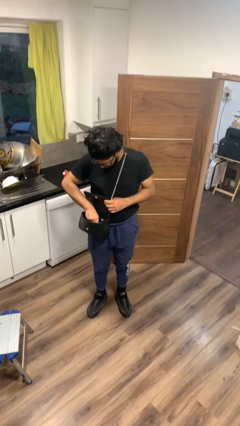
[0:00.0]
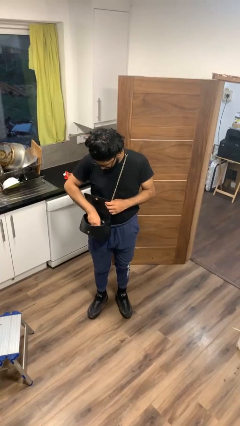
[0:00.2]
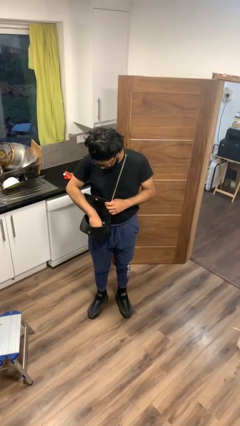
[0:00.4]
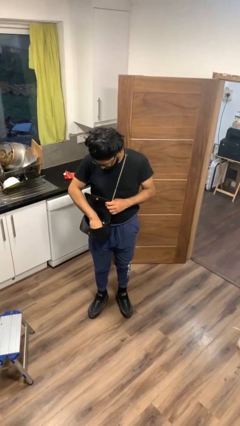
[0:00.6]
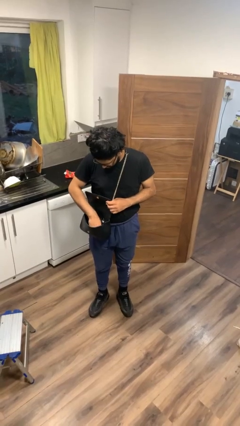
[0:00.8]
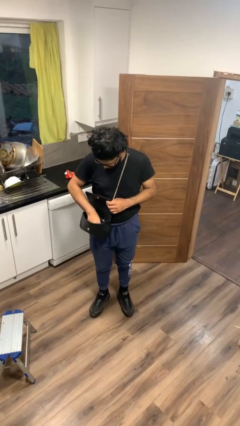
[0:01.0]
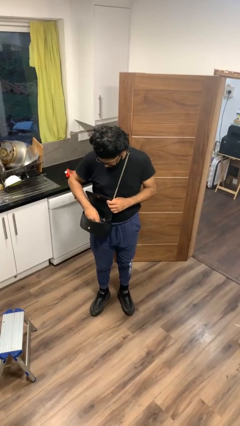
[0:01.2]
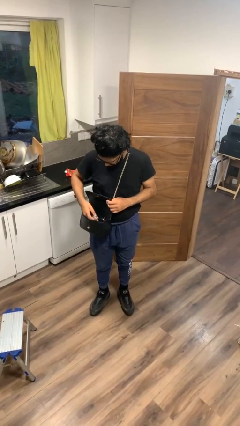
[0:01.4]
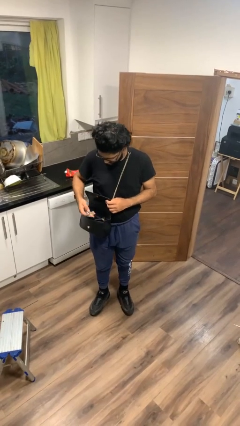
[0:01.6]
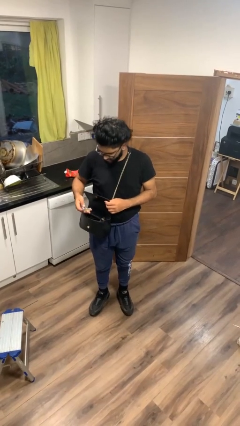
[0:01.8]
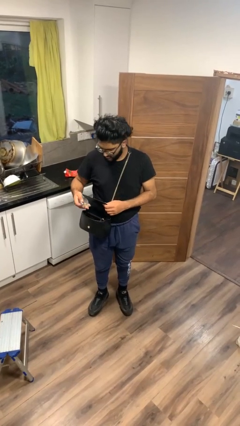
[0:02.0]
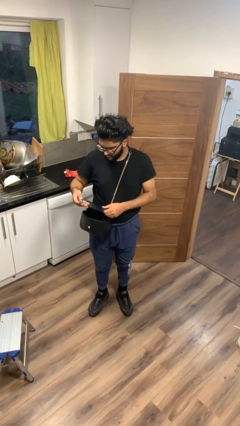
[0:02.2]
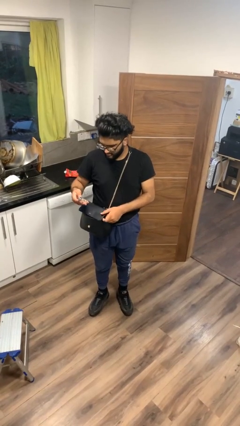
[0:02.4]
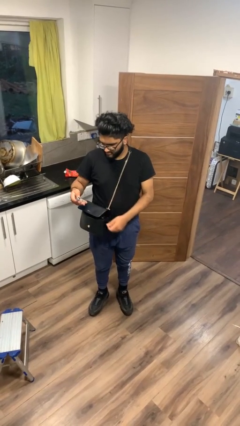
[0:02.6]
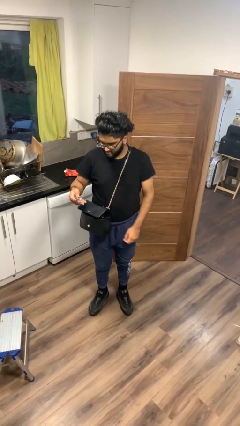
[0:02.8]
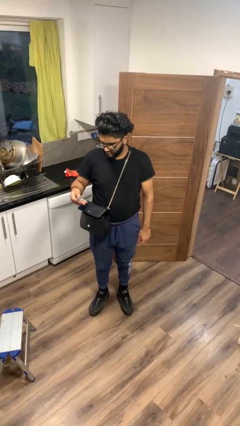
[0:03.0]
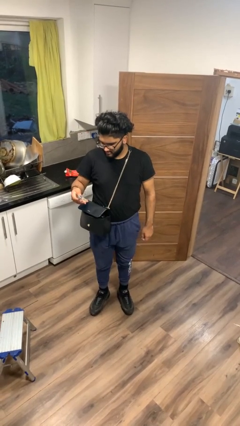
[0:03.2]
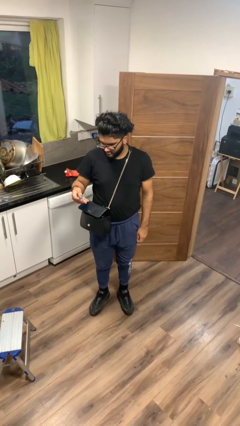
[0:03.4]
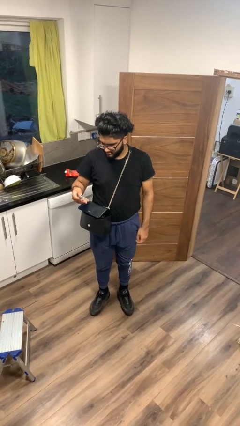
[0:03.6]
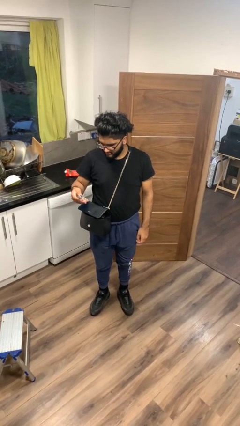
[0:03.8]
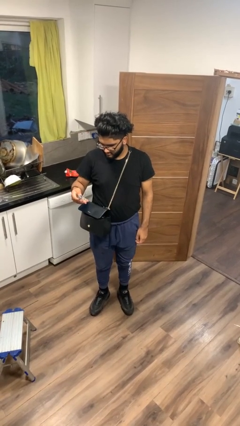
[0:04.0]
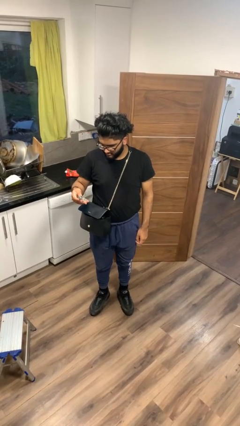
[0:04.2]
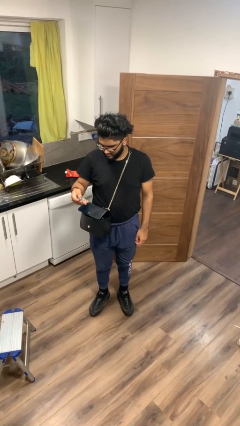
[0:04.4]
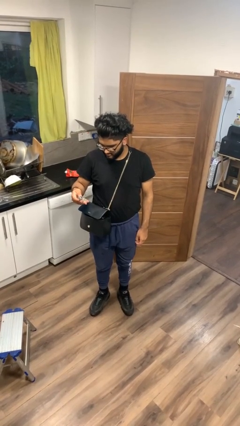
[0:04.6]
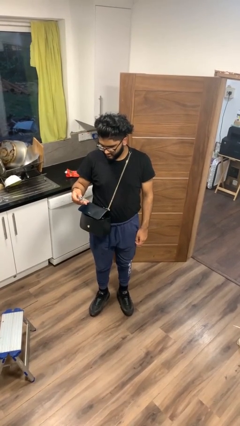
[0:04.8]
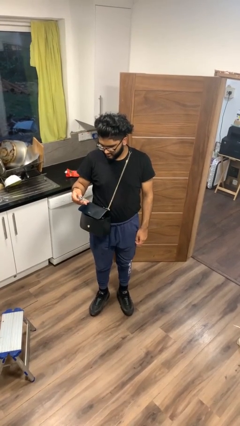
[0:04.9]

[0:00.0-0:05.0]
person takes object from purse

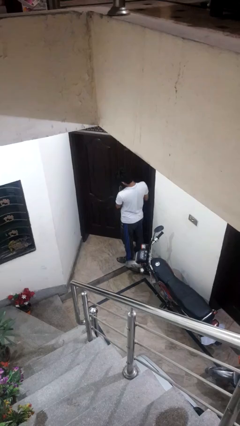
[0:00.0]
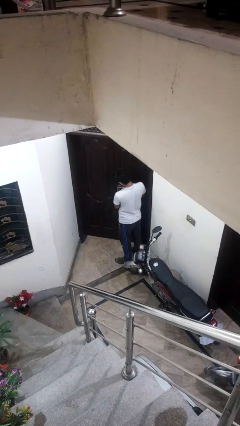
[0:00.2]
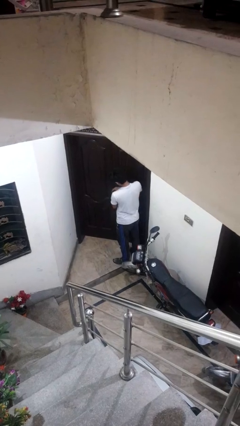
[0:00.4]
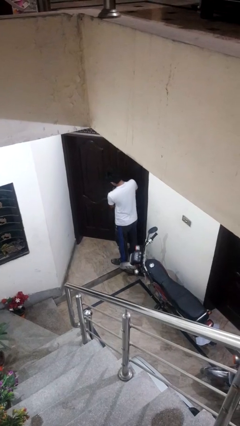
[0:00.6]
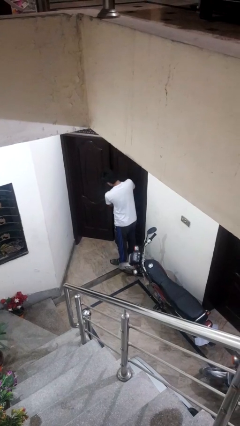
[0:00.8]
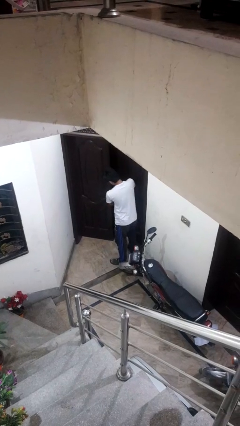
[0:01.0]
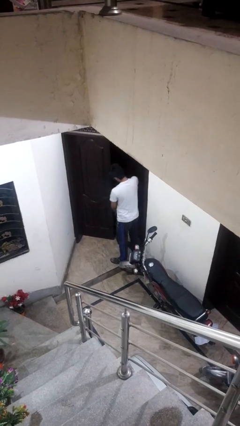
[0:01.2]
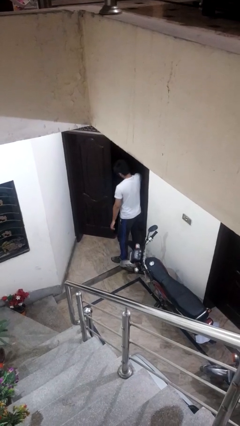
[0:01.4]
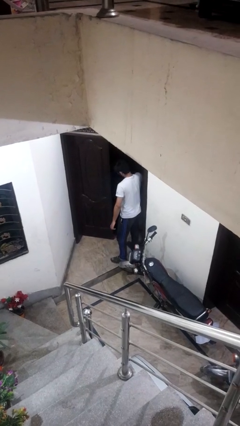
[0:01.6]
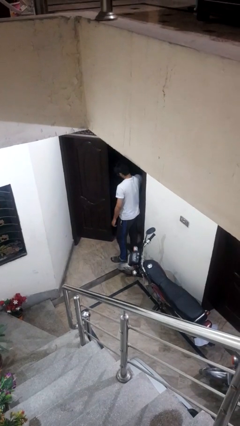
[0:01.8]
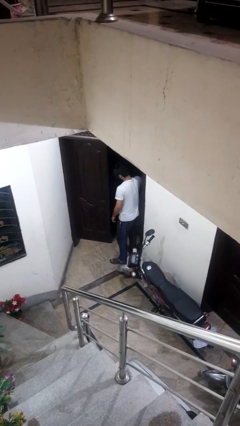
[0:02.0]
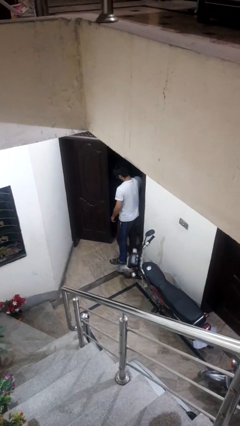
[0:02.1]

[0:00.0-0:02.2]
person opens facility door

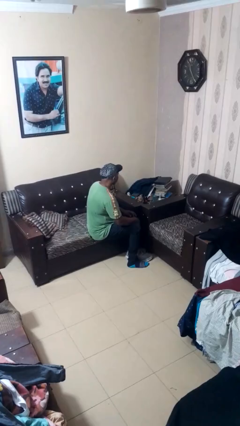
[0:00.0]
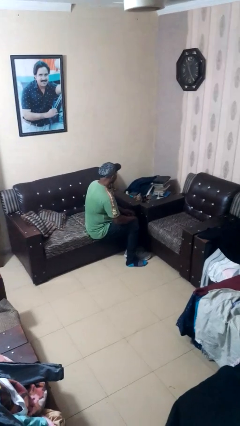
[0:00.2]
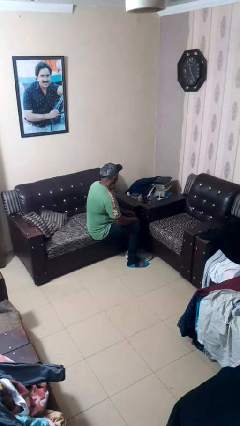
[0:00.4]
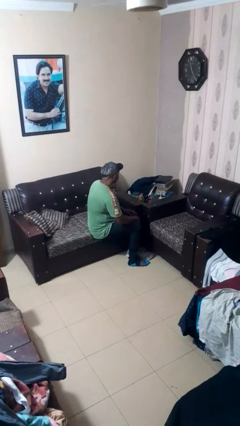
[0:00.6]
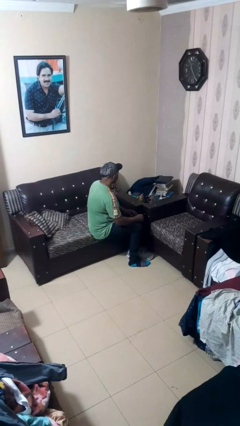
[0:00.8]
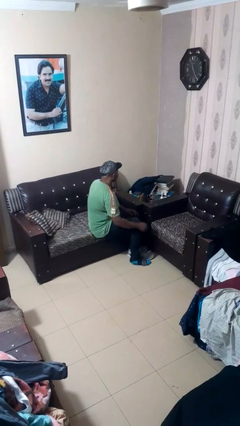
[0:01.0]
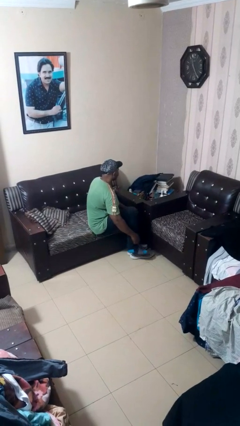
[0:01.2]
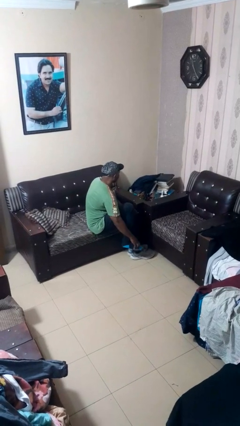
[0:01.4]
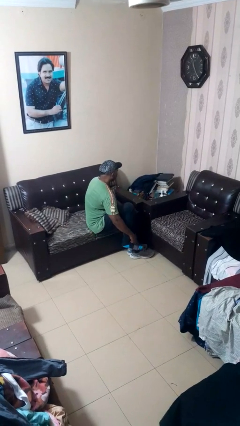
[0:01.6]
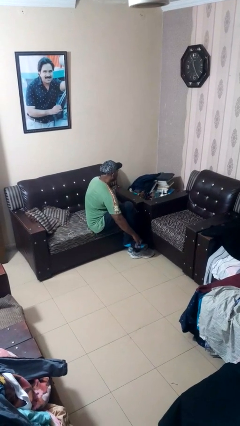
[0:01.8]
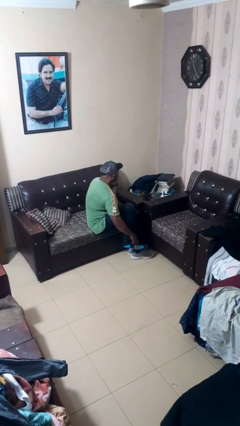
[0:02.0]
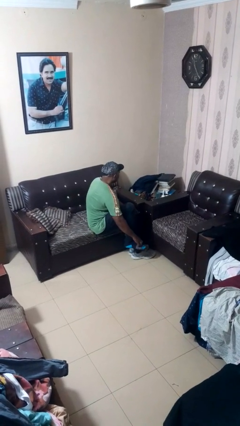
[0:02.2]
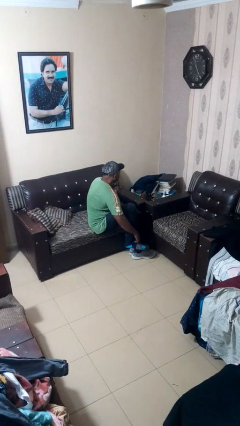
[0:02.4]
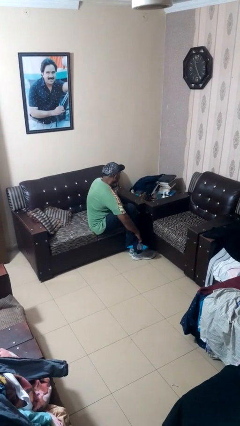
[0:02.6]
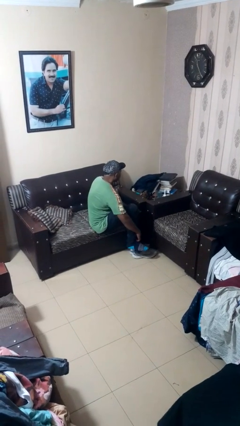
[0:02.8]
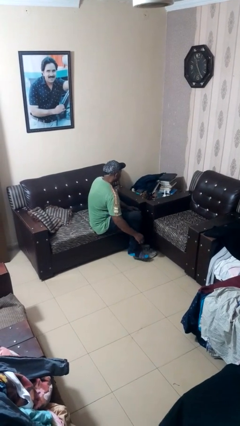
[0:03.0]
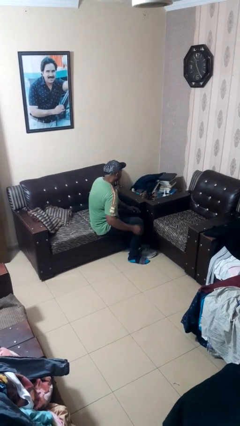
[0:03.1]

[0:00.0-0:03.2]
person rubs foot

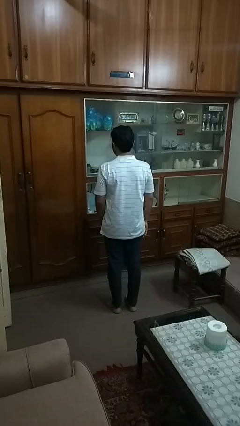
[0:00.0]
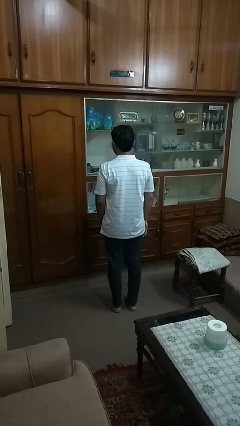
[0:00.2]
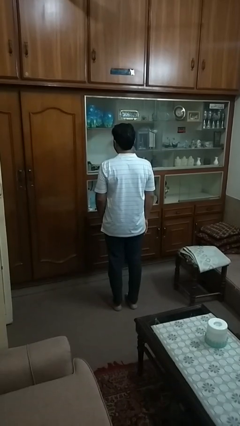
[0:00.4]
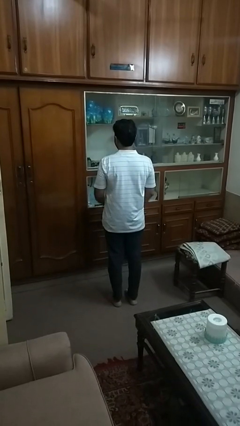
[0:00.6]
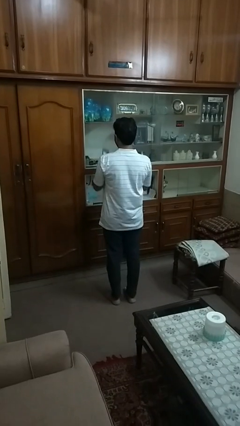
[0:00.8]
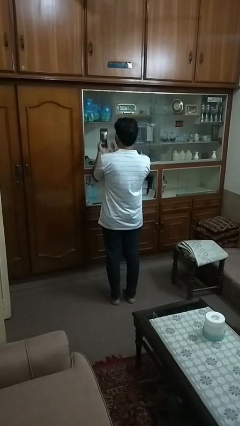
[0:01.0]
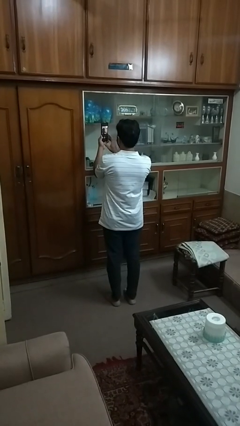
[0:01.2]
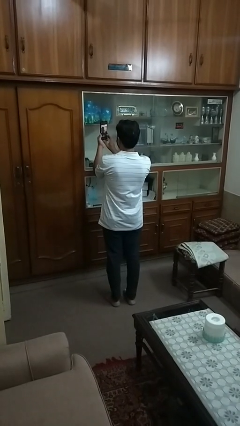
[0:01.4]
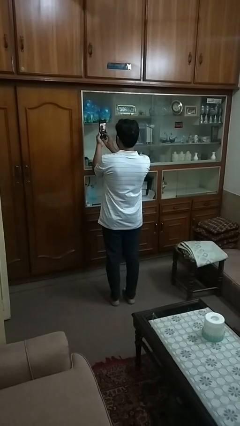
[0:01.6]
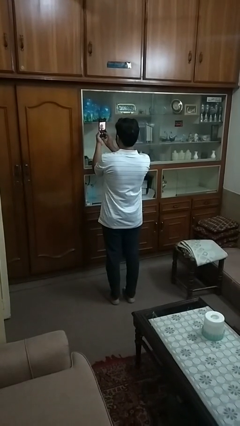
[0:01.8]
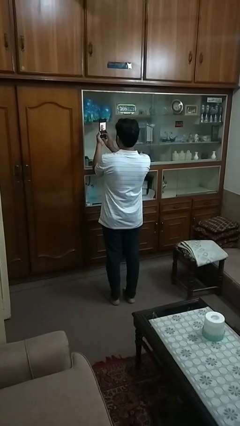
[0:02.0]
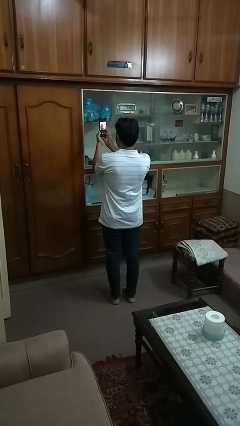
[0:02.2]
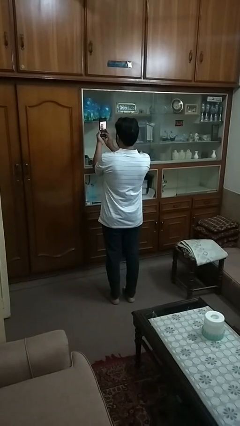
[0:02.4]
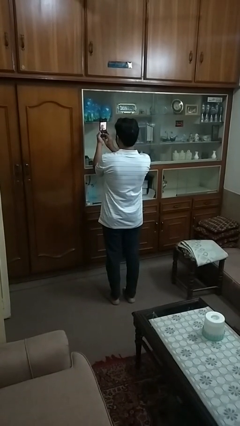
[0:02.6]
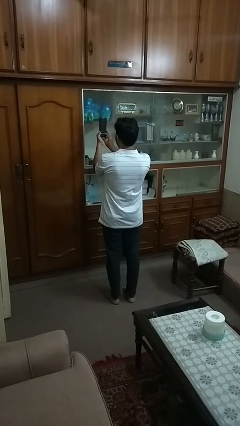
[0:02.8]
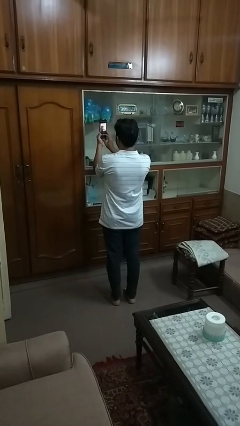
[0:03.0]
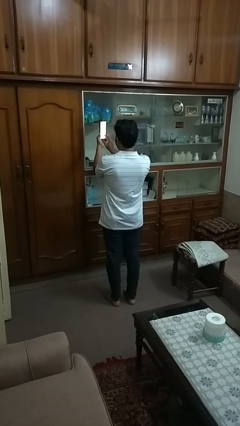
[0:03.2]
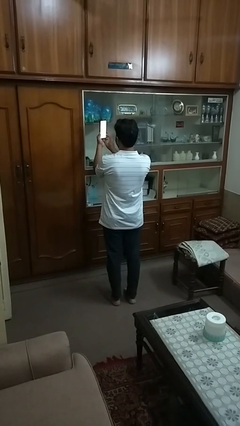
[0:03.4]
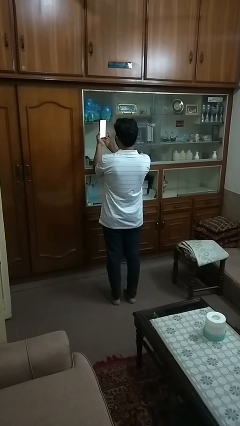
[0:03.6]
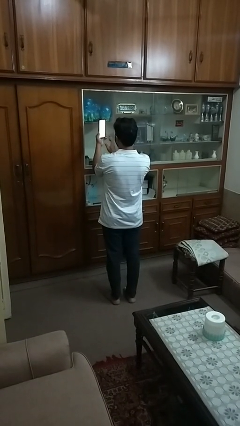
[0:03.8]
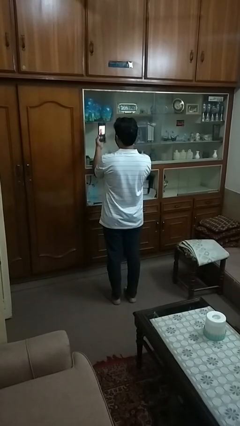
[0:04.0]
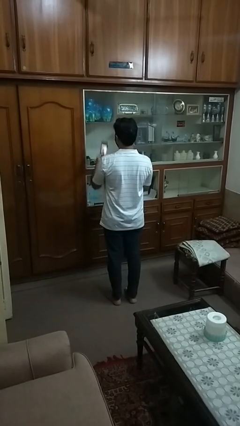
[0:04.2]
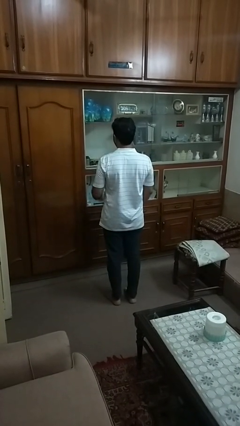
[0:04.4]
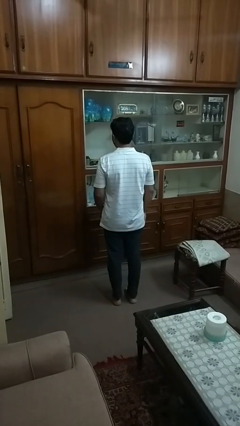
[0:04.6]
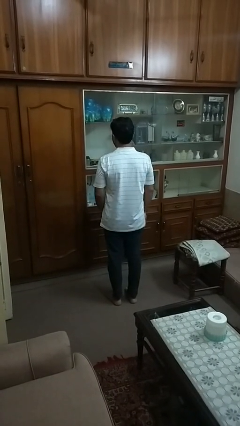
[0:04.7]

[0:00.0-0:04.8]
person takes selfie

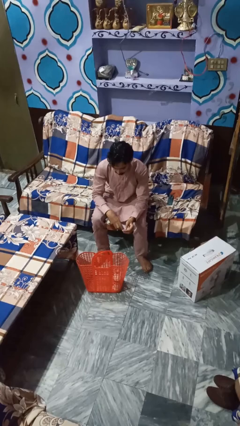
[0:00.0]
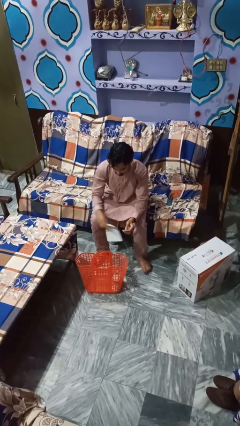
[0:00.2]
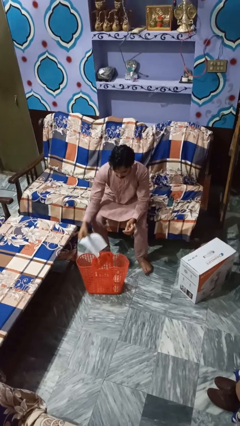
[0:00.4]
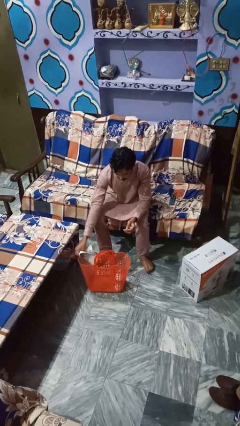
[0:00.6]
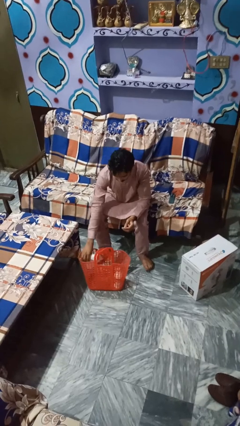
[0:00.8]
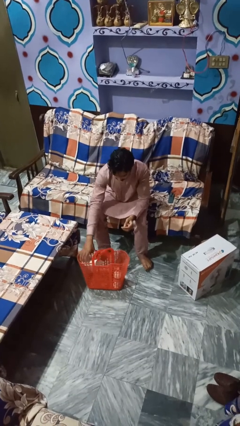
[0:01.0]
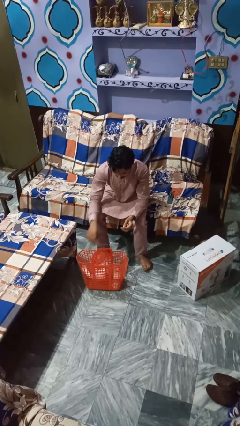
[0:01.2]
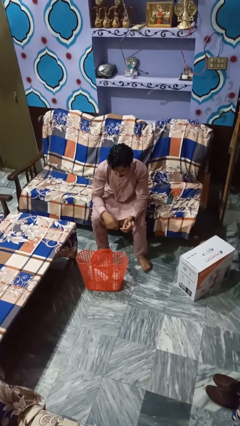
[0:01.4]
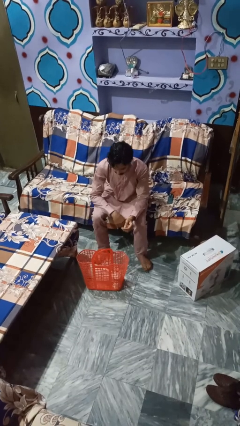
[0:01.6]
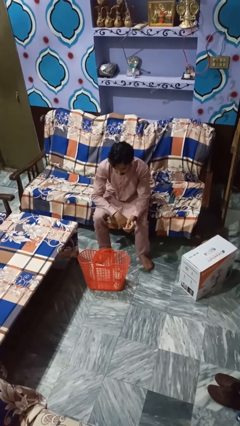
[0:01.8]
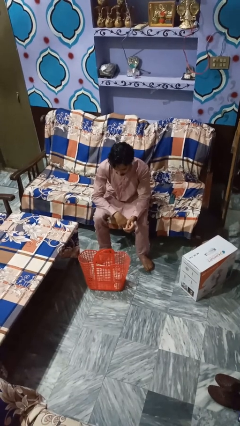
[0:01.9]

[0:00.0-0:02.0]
person discards trash
